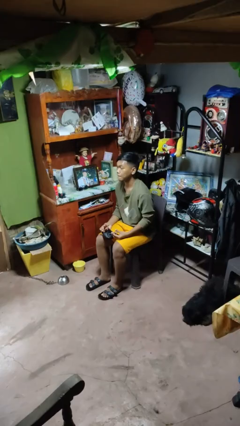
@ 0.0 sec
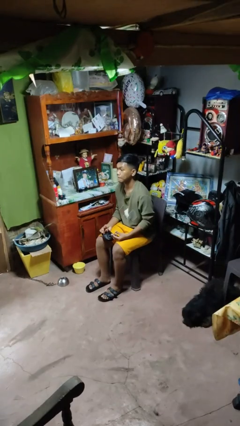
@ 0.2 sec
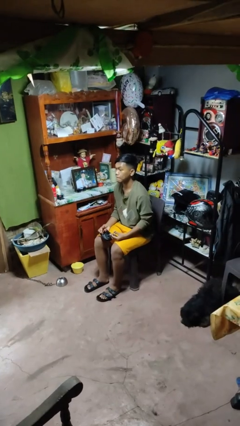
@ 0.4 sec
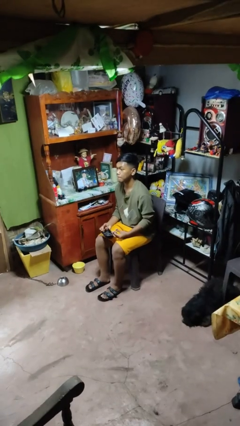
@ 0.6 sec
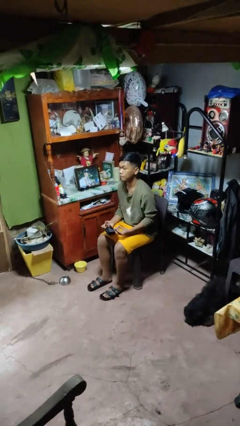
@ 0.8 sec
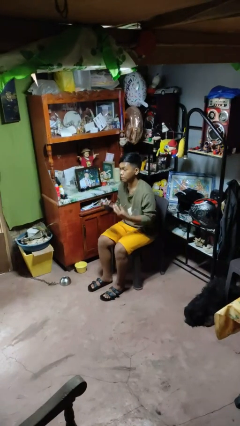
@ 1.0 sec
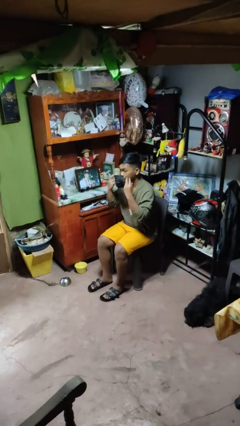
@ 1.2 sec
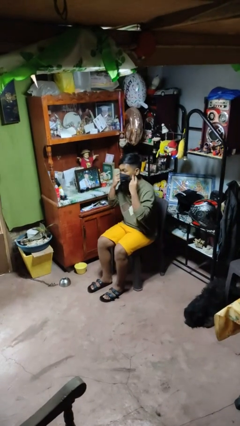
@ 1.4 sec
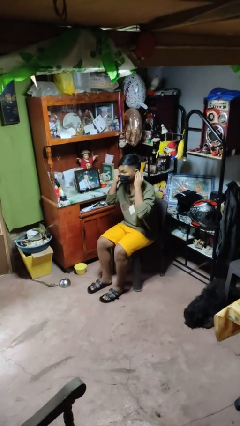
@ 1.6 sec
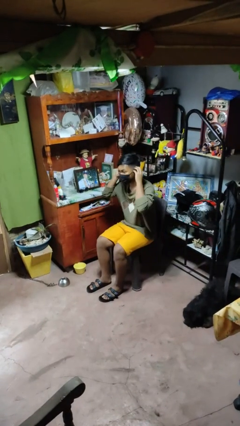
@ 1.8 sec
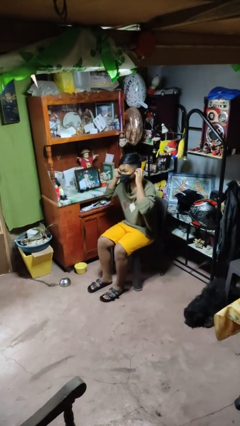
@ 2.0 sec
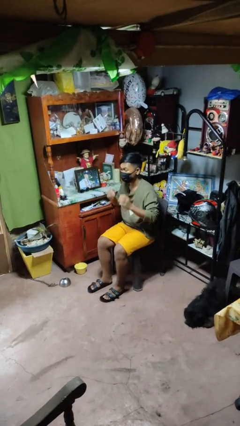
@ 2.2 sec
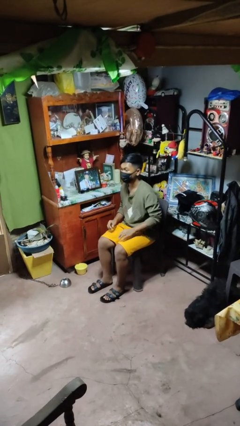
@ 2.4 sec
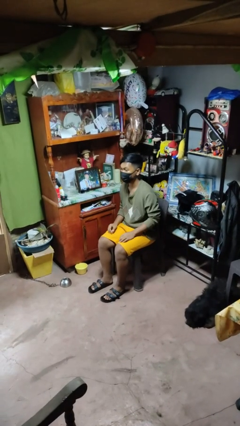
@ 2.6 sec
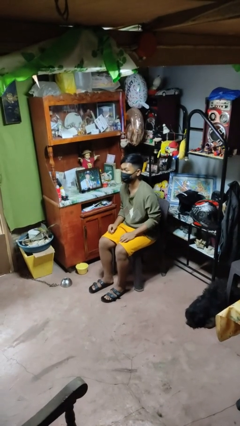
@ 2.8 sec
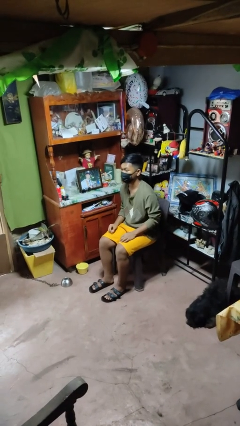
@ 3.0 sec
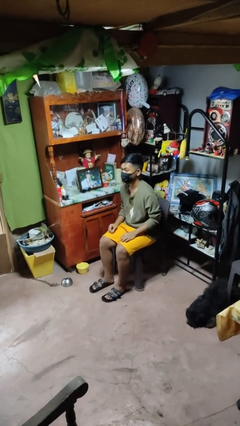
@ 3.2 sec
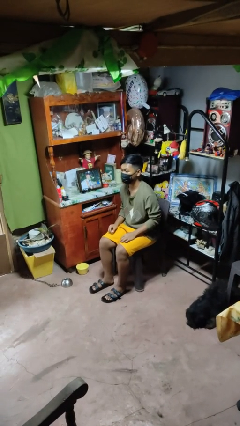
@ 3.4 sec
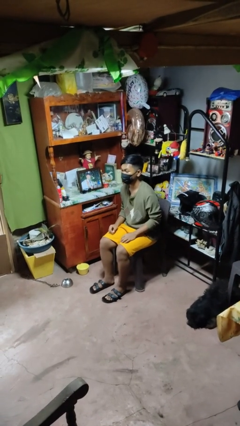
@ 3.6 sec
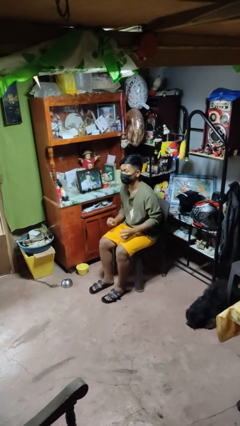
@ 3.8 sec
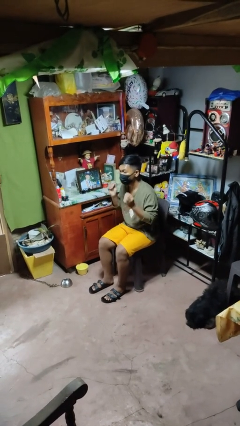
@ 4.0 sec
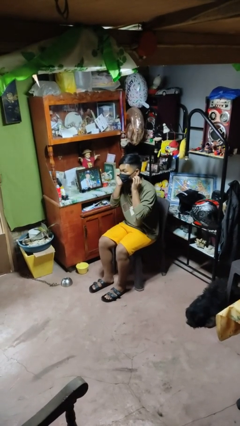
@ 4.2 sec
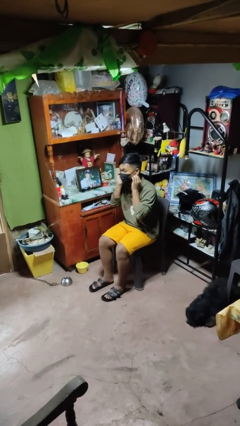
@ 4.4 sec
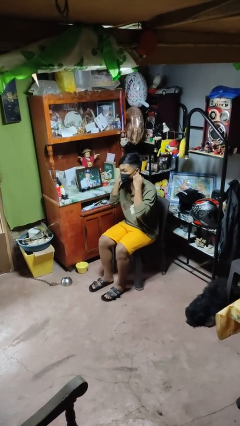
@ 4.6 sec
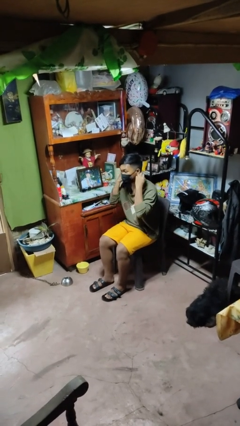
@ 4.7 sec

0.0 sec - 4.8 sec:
person puts on facemask

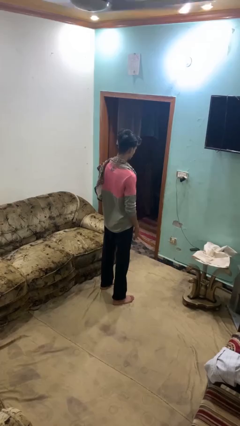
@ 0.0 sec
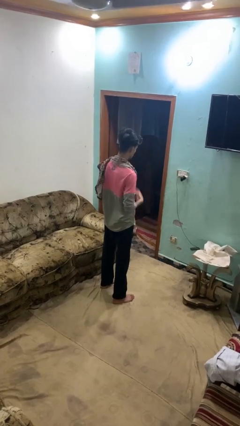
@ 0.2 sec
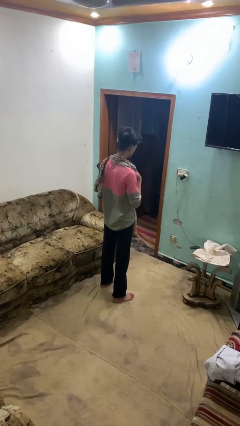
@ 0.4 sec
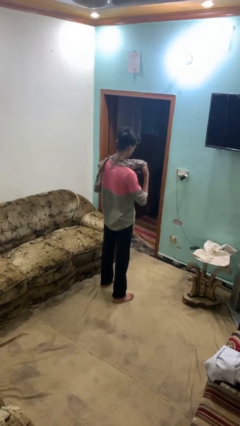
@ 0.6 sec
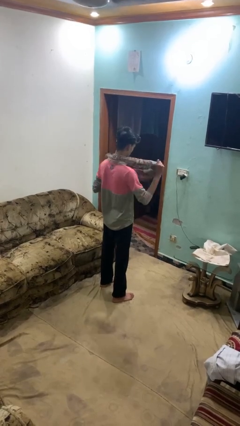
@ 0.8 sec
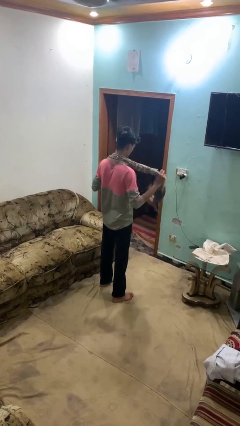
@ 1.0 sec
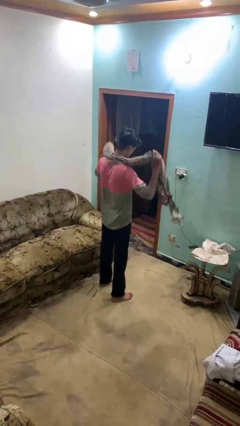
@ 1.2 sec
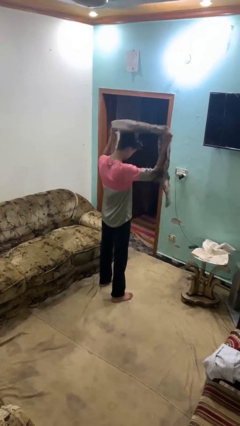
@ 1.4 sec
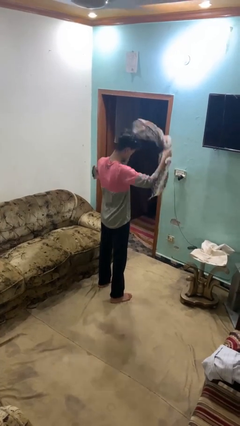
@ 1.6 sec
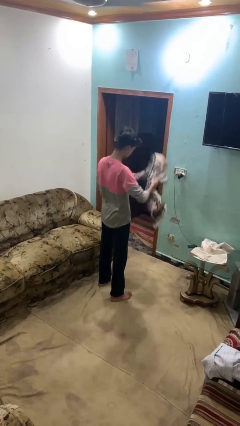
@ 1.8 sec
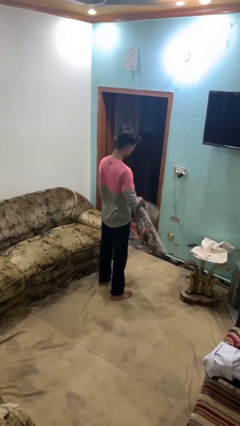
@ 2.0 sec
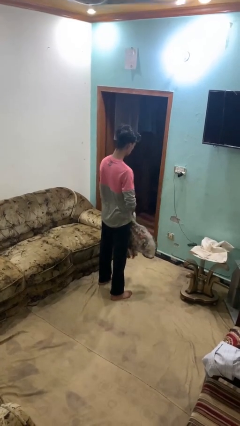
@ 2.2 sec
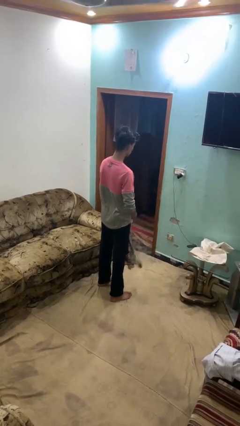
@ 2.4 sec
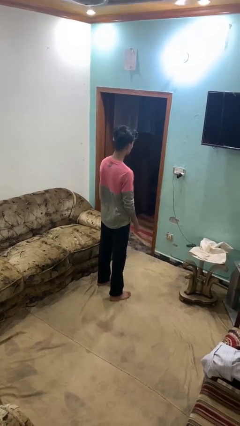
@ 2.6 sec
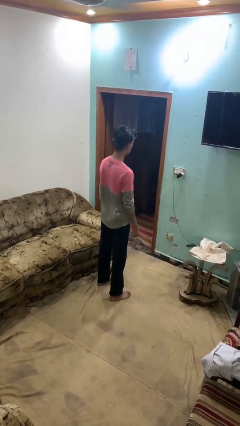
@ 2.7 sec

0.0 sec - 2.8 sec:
person takes off scarf

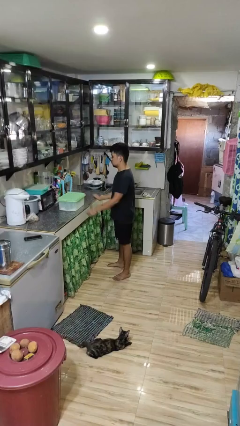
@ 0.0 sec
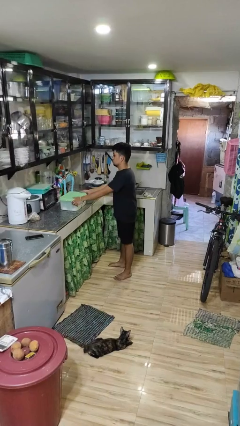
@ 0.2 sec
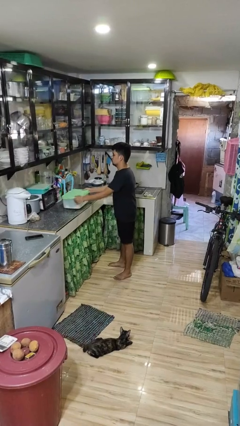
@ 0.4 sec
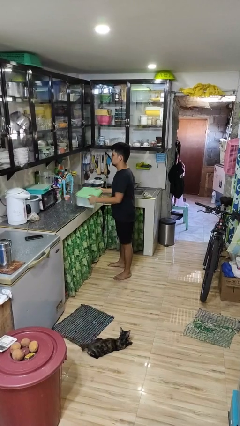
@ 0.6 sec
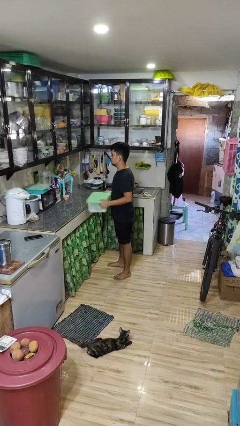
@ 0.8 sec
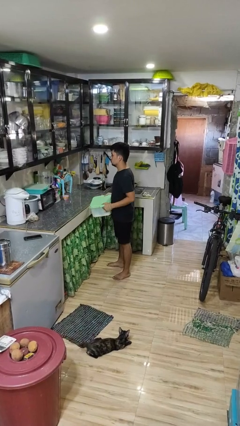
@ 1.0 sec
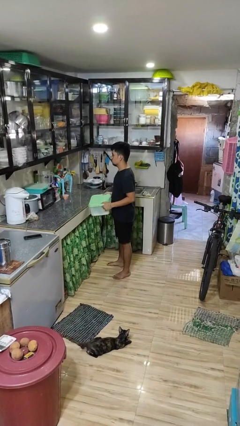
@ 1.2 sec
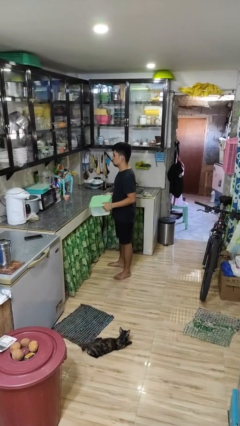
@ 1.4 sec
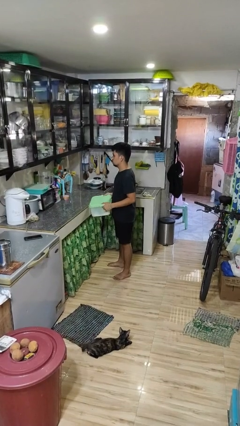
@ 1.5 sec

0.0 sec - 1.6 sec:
person picks up object from countertop

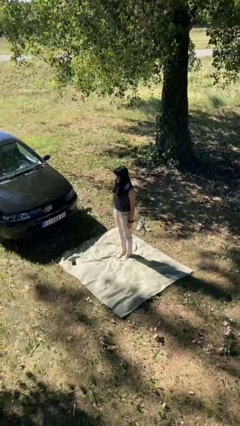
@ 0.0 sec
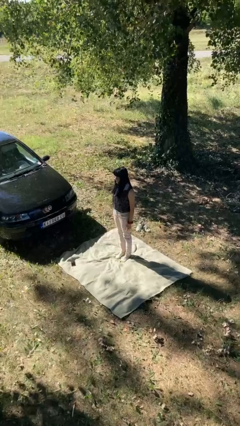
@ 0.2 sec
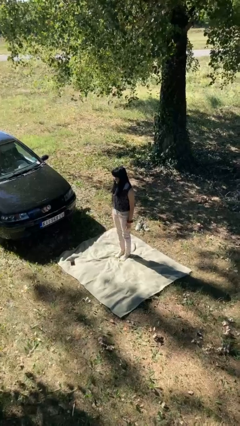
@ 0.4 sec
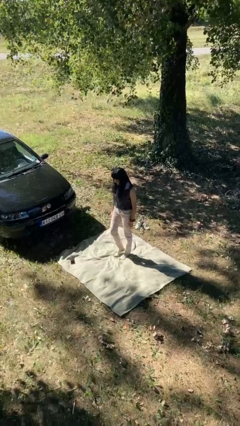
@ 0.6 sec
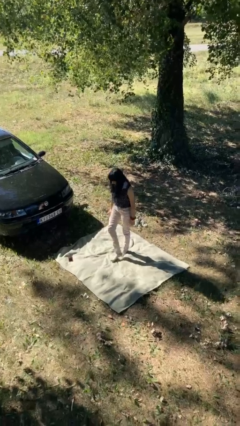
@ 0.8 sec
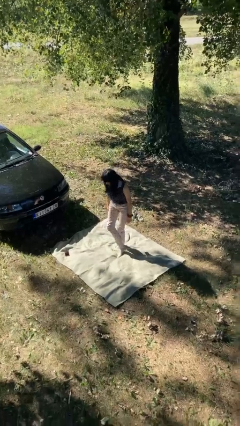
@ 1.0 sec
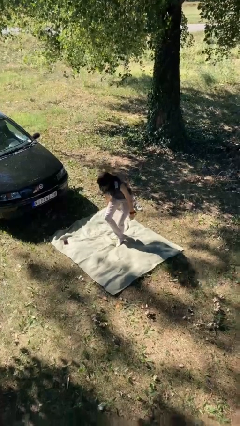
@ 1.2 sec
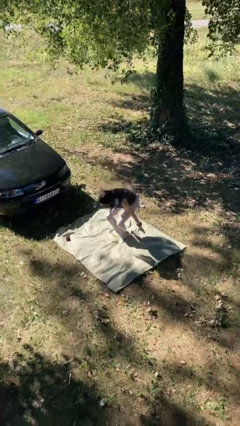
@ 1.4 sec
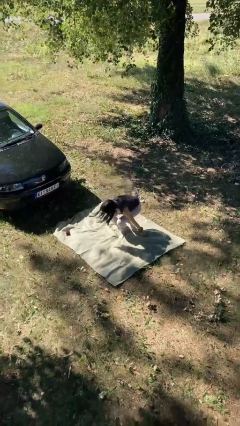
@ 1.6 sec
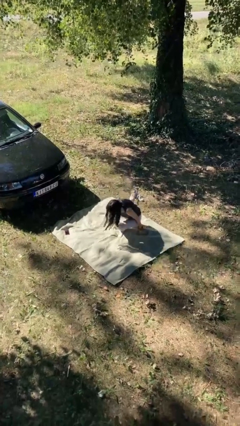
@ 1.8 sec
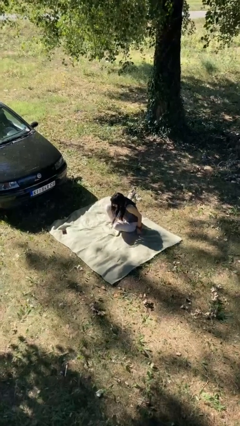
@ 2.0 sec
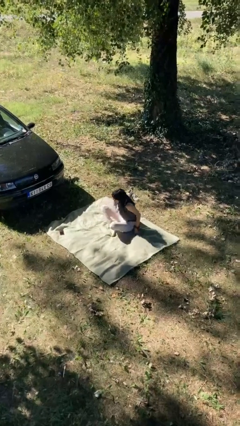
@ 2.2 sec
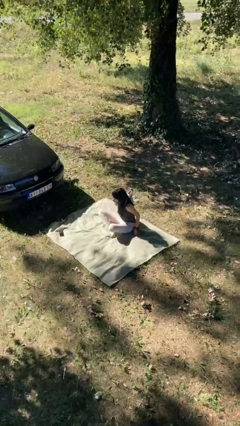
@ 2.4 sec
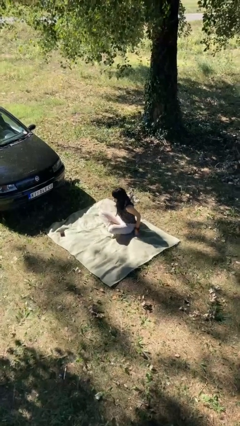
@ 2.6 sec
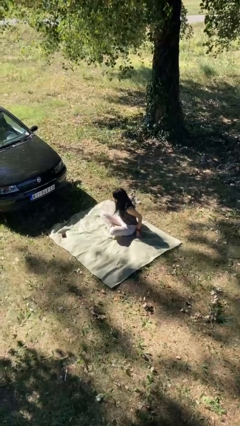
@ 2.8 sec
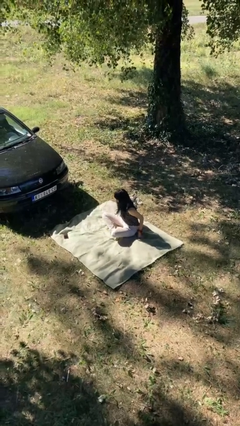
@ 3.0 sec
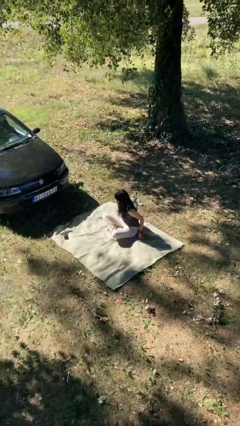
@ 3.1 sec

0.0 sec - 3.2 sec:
person sits crisscross

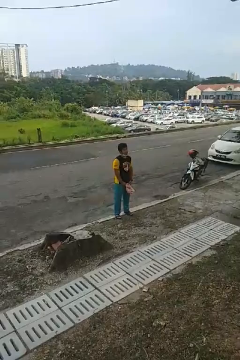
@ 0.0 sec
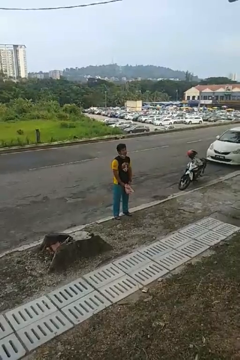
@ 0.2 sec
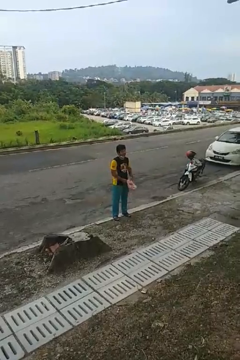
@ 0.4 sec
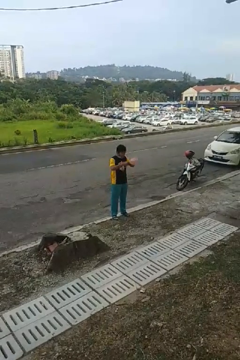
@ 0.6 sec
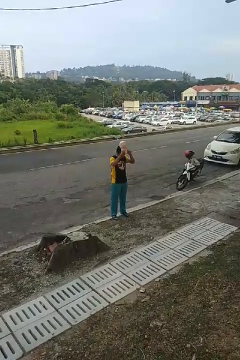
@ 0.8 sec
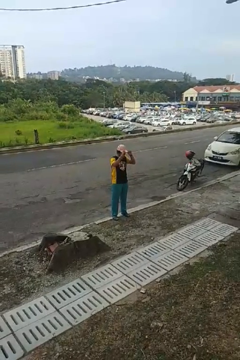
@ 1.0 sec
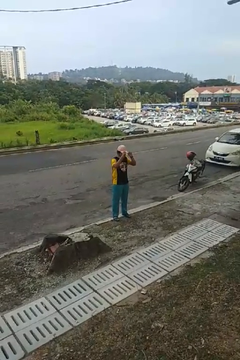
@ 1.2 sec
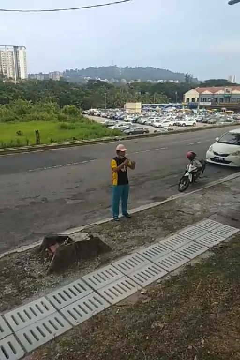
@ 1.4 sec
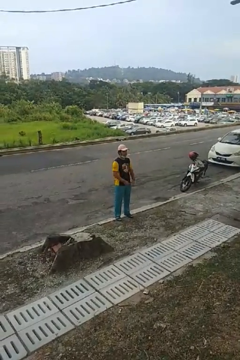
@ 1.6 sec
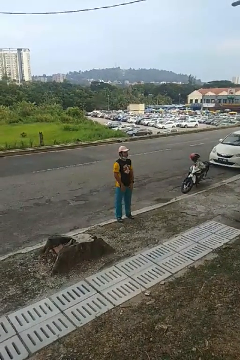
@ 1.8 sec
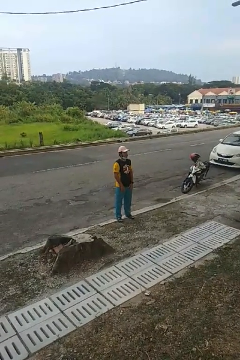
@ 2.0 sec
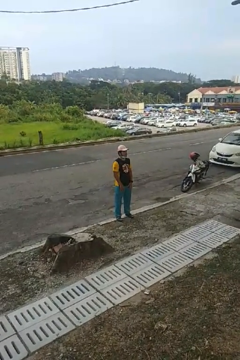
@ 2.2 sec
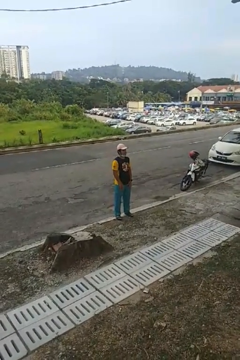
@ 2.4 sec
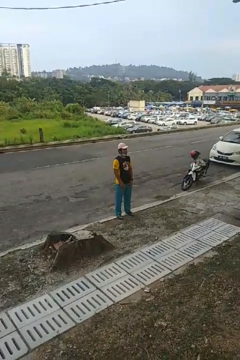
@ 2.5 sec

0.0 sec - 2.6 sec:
person puts on hat

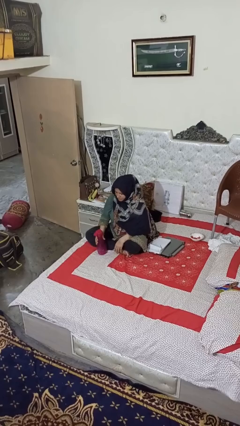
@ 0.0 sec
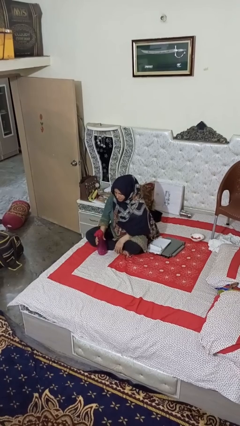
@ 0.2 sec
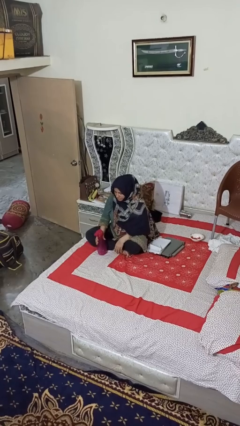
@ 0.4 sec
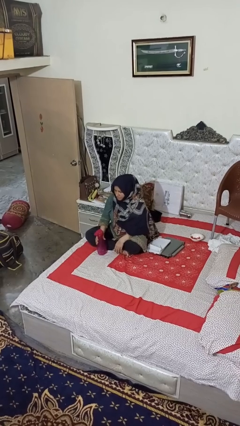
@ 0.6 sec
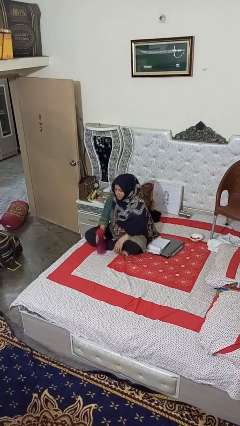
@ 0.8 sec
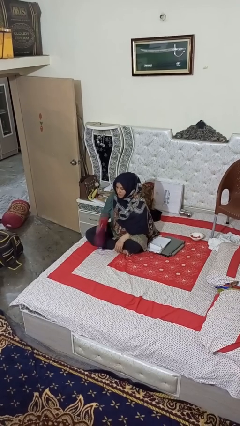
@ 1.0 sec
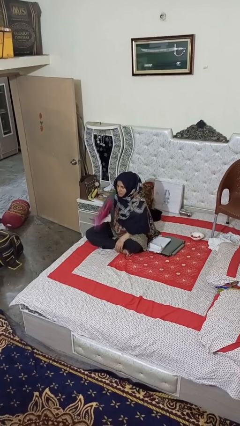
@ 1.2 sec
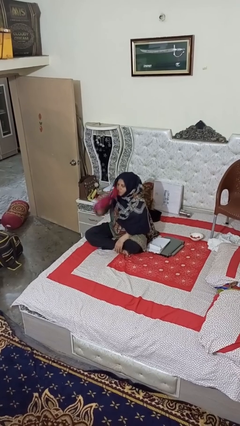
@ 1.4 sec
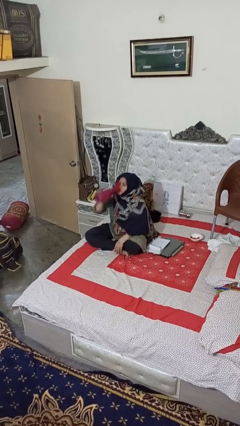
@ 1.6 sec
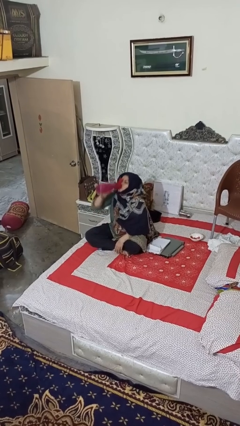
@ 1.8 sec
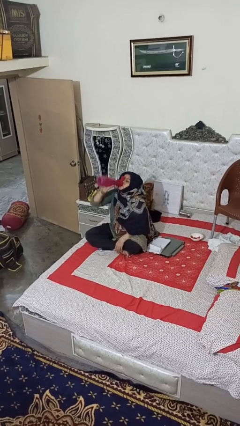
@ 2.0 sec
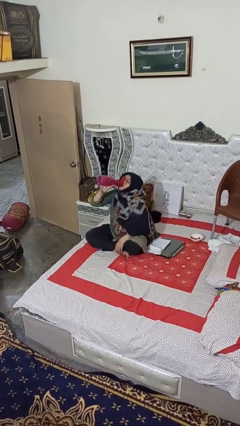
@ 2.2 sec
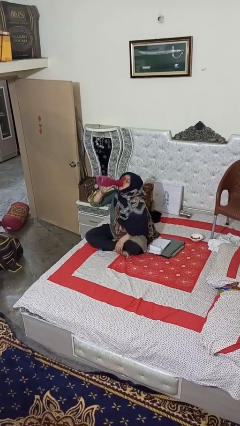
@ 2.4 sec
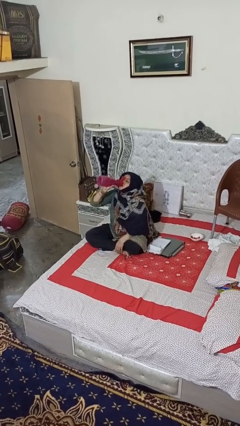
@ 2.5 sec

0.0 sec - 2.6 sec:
person drinks from bottle

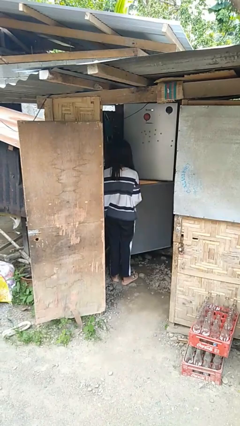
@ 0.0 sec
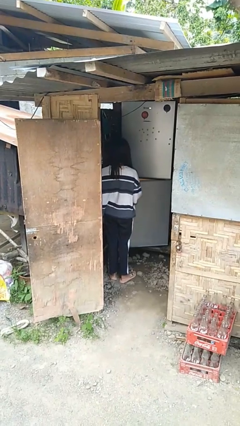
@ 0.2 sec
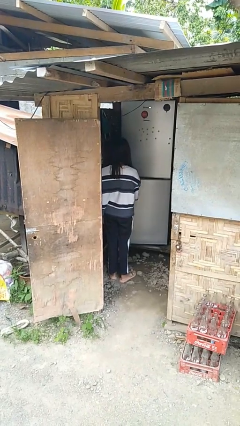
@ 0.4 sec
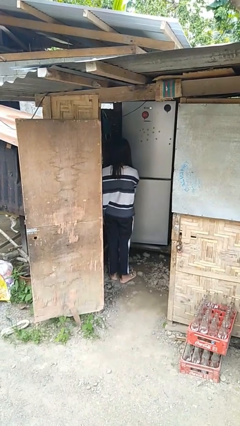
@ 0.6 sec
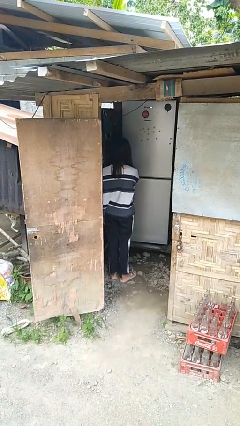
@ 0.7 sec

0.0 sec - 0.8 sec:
person closes refrigerator
